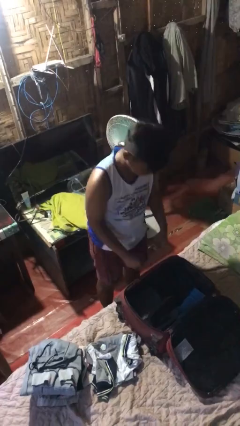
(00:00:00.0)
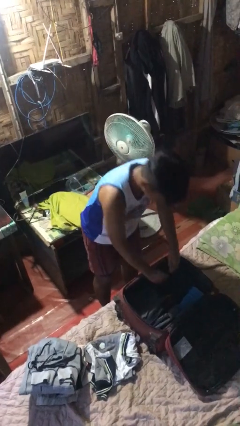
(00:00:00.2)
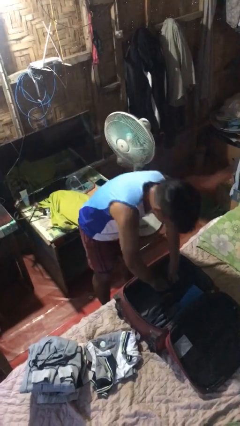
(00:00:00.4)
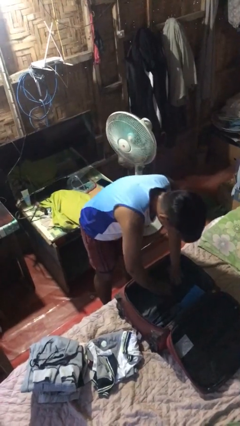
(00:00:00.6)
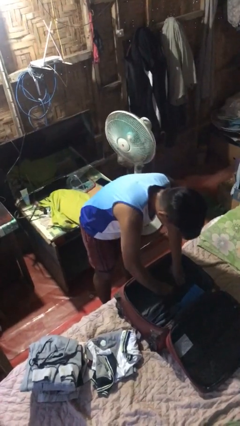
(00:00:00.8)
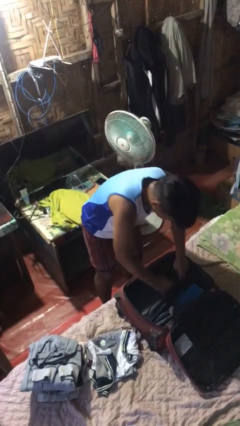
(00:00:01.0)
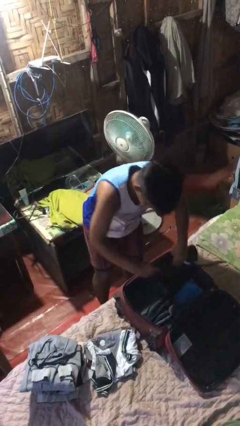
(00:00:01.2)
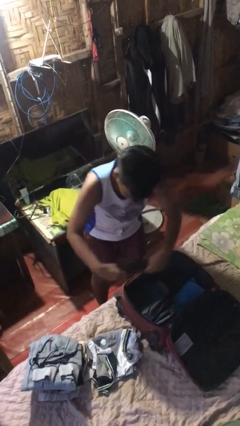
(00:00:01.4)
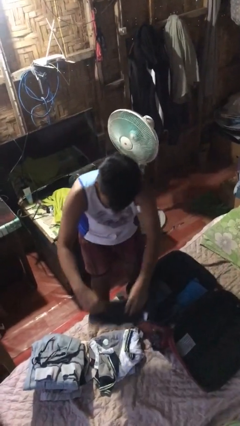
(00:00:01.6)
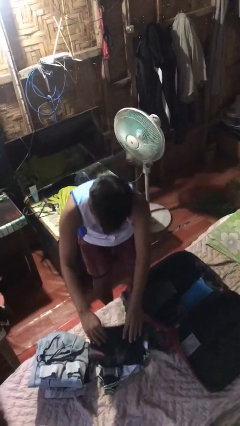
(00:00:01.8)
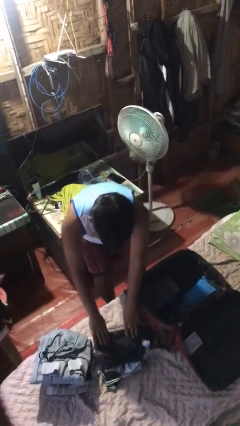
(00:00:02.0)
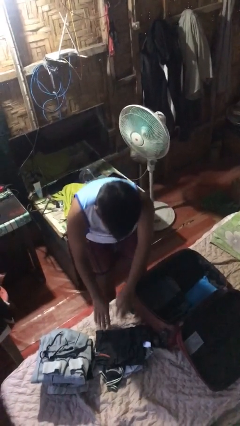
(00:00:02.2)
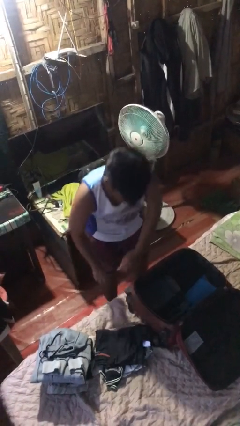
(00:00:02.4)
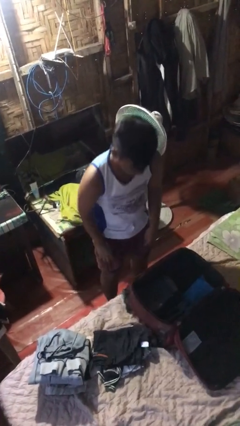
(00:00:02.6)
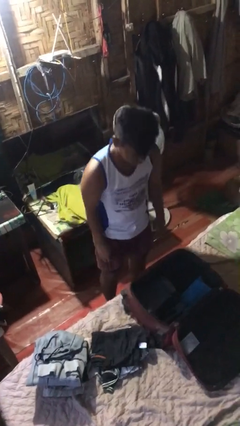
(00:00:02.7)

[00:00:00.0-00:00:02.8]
person unloads clothes from suitcase

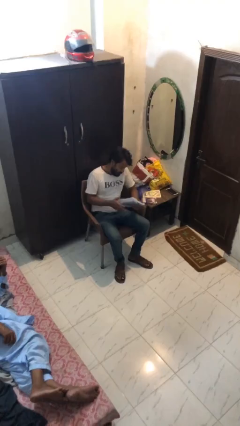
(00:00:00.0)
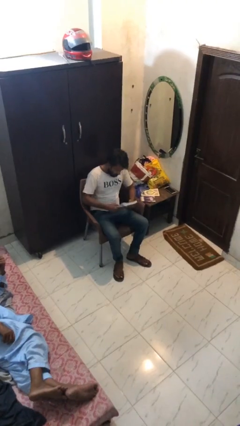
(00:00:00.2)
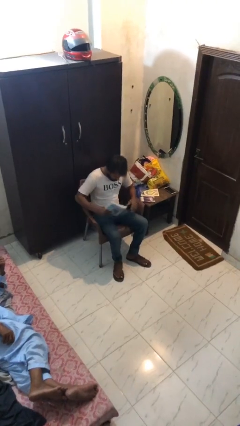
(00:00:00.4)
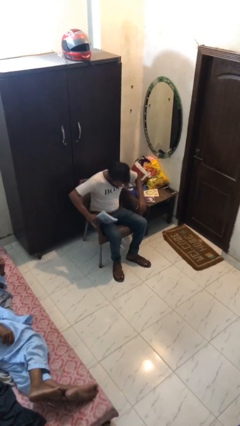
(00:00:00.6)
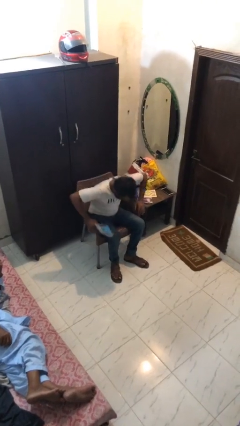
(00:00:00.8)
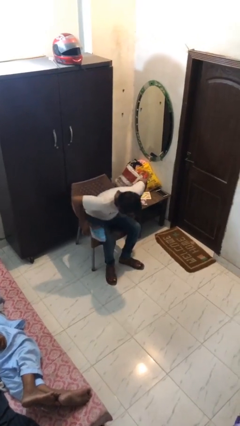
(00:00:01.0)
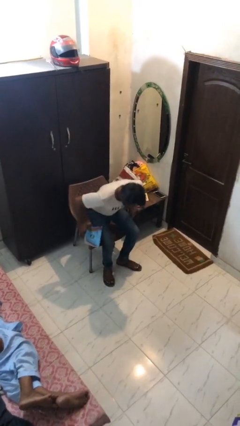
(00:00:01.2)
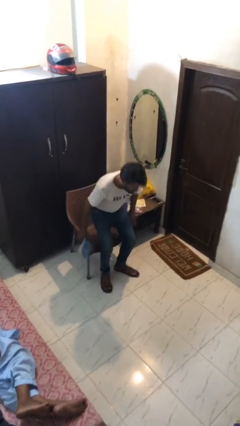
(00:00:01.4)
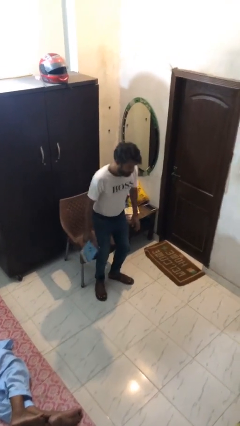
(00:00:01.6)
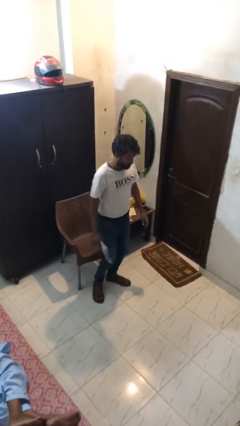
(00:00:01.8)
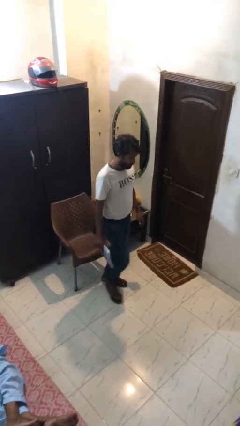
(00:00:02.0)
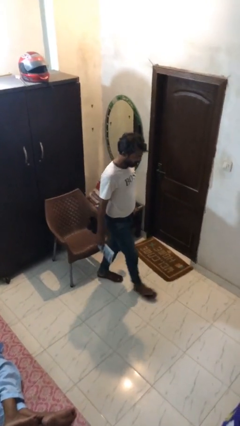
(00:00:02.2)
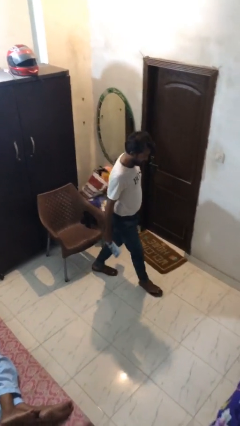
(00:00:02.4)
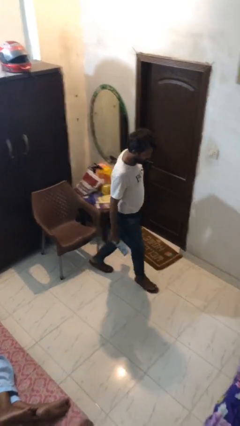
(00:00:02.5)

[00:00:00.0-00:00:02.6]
person stands up

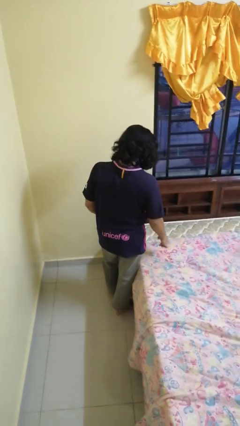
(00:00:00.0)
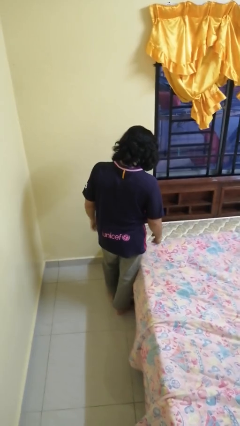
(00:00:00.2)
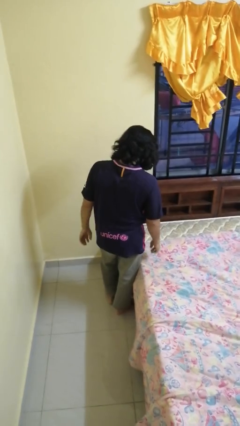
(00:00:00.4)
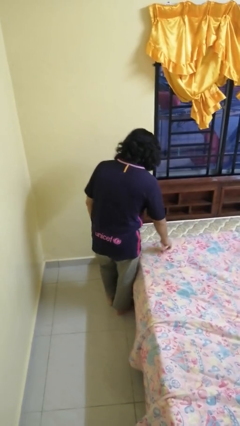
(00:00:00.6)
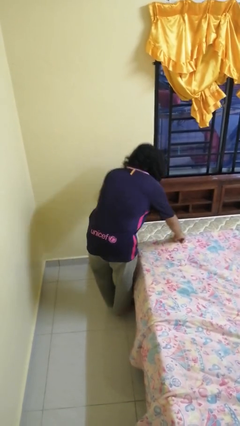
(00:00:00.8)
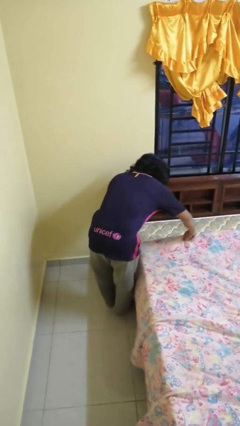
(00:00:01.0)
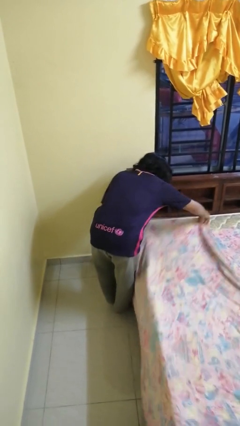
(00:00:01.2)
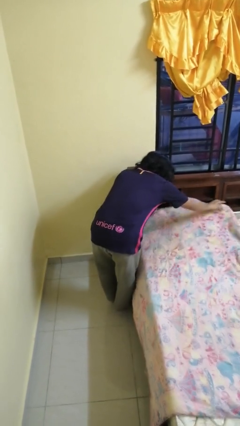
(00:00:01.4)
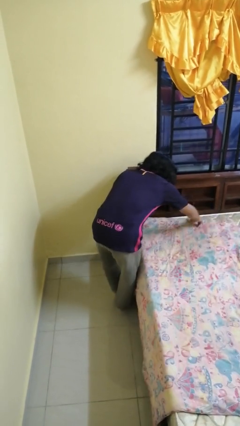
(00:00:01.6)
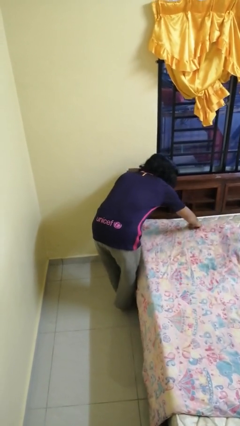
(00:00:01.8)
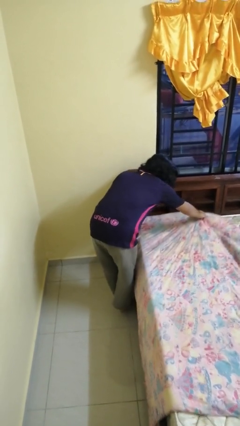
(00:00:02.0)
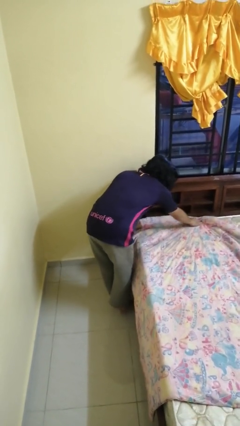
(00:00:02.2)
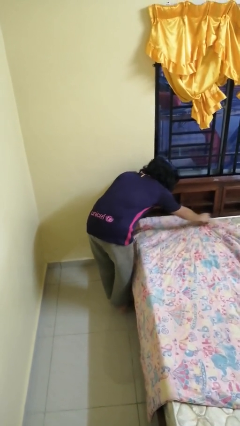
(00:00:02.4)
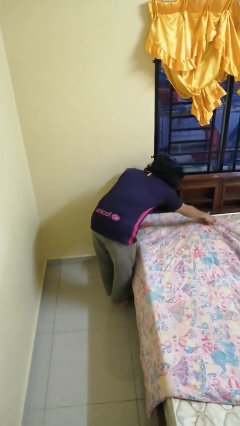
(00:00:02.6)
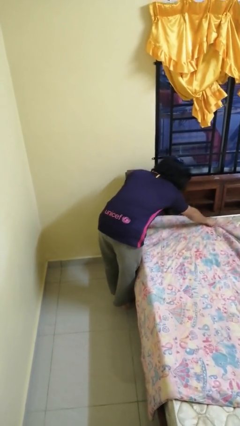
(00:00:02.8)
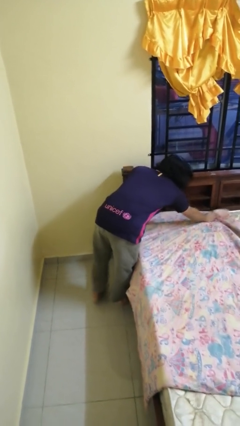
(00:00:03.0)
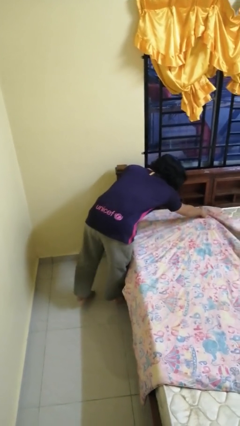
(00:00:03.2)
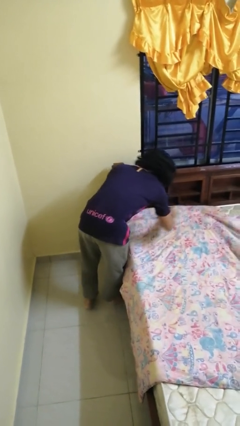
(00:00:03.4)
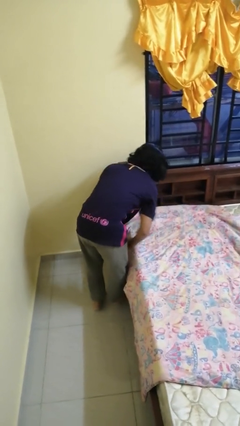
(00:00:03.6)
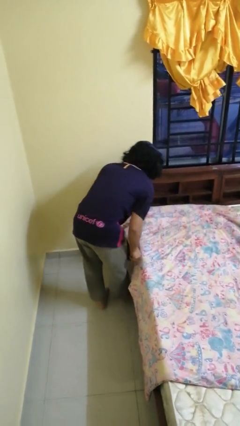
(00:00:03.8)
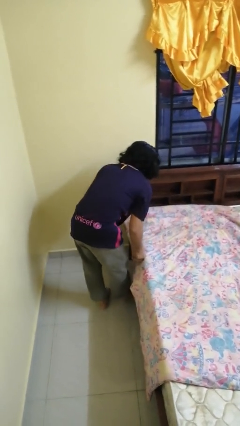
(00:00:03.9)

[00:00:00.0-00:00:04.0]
person makes bed

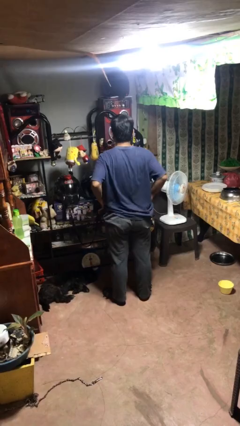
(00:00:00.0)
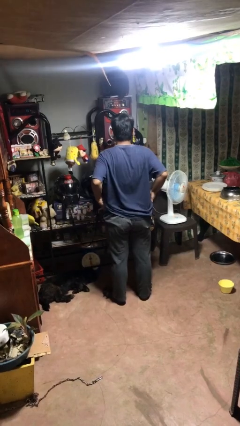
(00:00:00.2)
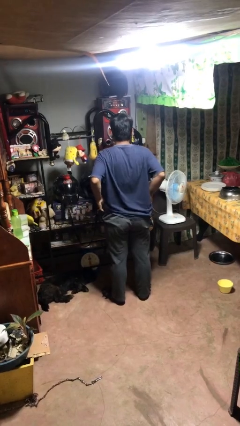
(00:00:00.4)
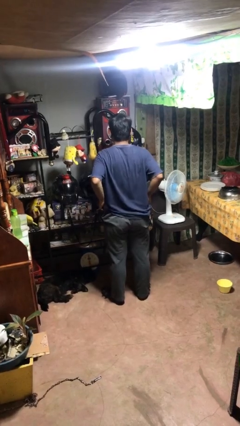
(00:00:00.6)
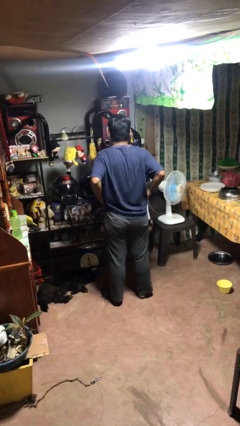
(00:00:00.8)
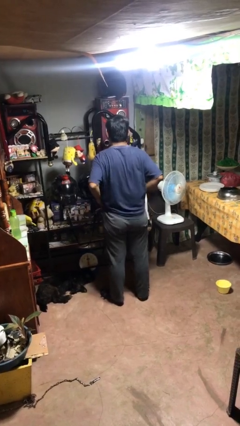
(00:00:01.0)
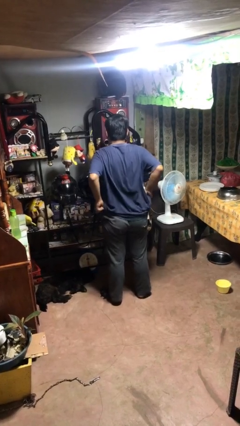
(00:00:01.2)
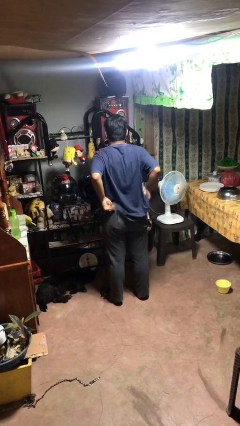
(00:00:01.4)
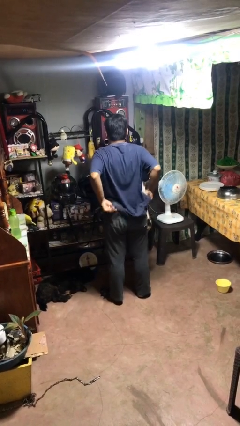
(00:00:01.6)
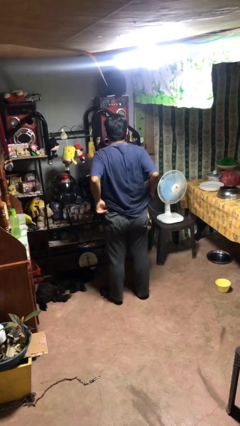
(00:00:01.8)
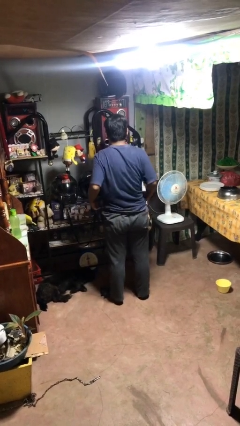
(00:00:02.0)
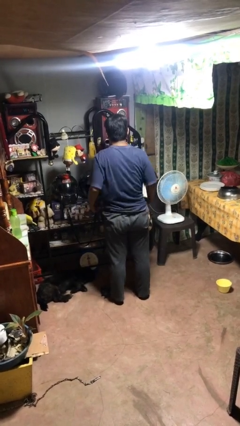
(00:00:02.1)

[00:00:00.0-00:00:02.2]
person hikes up pants

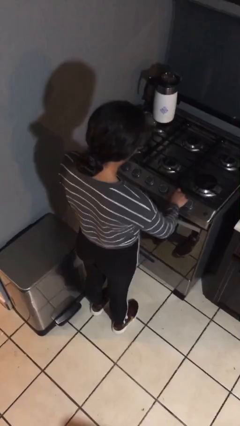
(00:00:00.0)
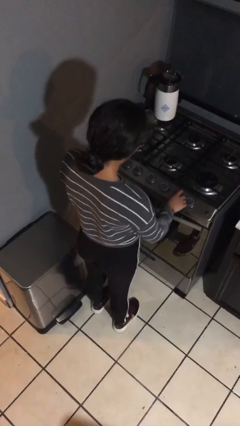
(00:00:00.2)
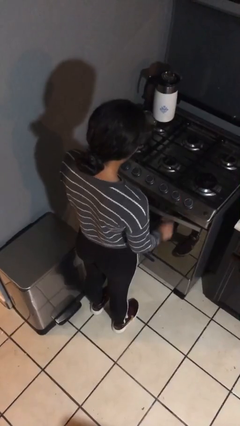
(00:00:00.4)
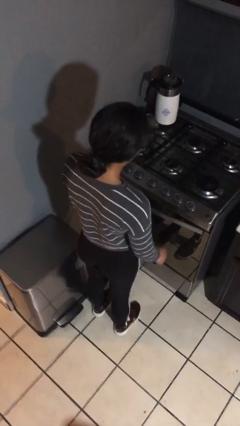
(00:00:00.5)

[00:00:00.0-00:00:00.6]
person turns off stovetop

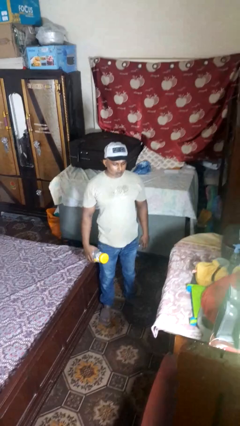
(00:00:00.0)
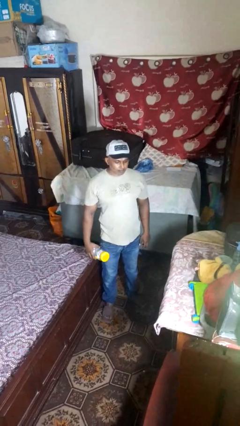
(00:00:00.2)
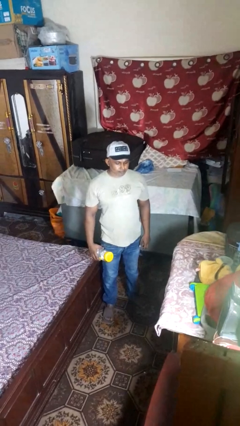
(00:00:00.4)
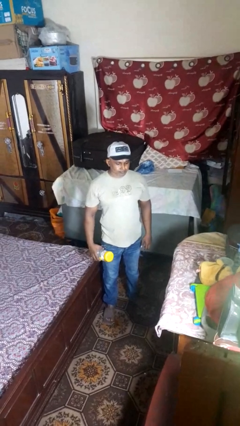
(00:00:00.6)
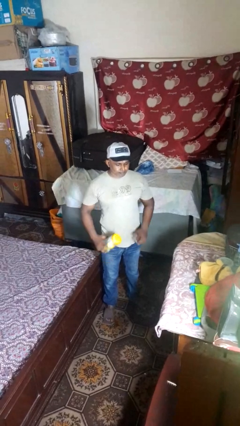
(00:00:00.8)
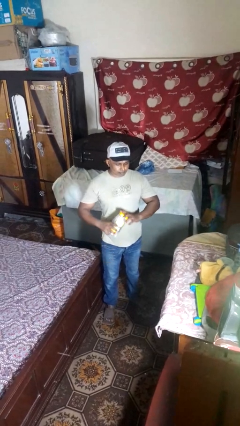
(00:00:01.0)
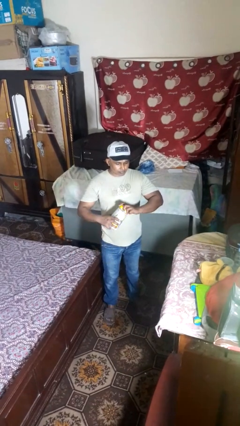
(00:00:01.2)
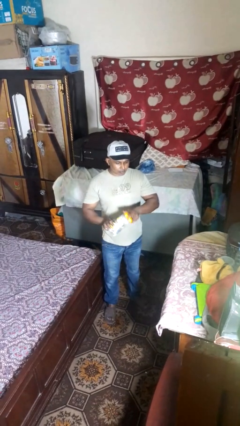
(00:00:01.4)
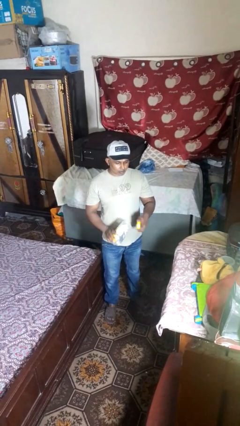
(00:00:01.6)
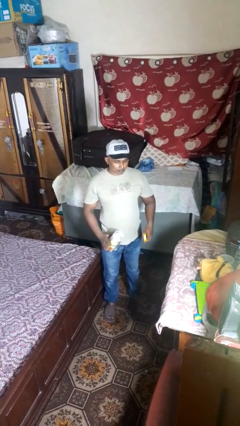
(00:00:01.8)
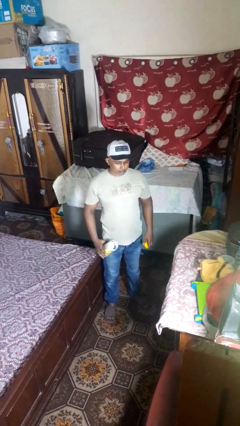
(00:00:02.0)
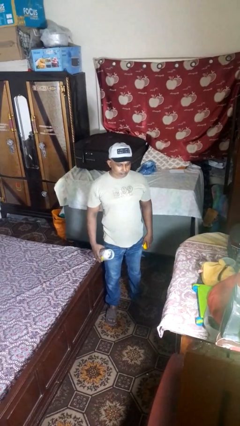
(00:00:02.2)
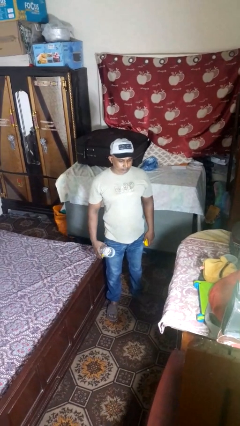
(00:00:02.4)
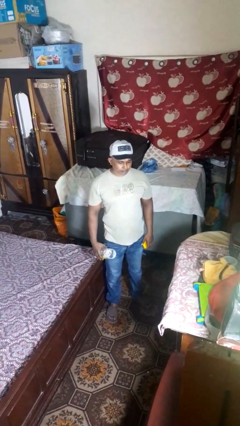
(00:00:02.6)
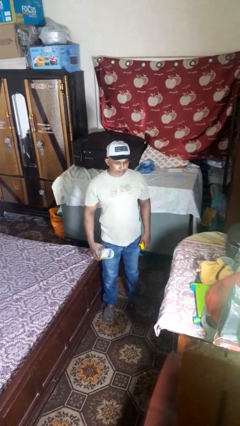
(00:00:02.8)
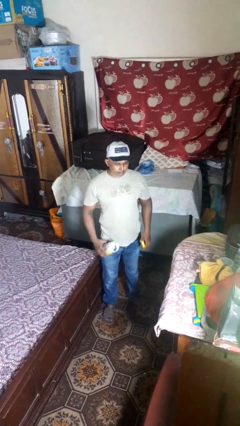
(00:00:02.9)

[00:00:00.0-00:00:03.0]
person opens jar

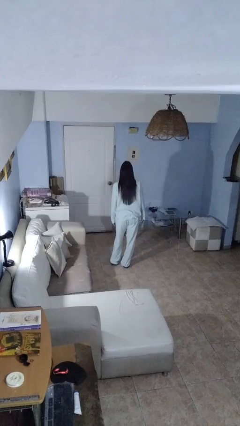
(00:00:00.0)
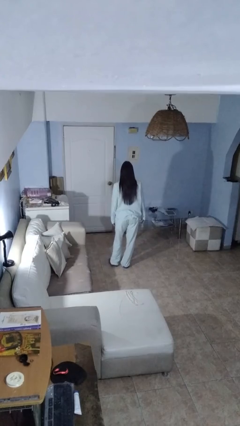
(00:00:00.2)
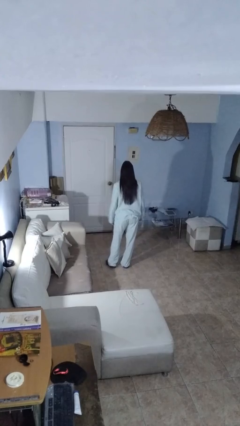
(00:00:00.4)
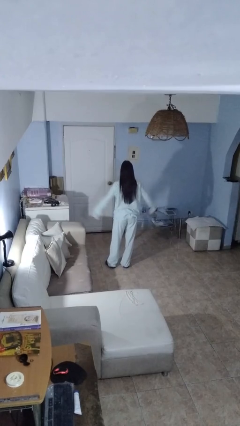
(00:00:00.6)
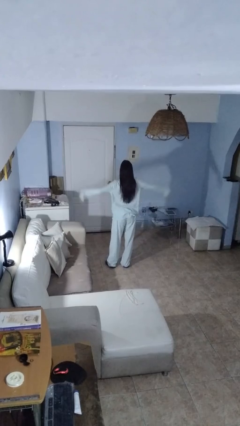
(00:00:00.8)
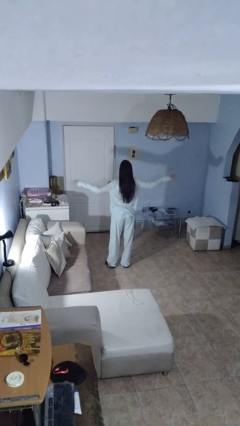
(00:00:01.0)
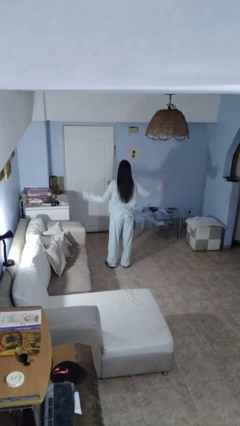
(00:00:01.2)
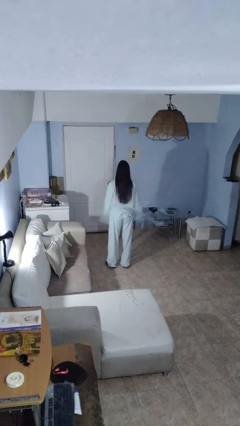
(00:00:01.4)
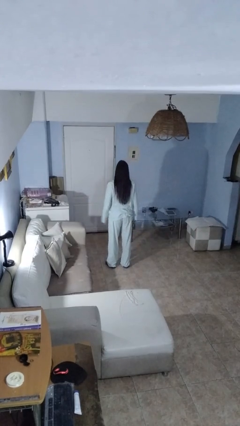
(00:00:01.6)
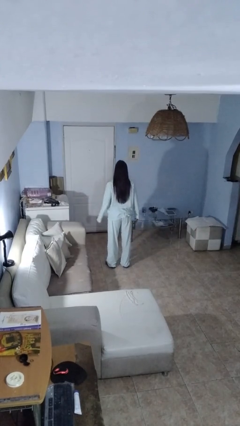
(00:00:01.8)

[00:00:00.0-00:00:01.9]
person slaps hands on thighs
